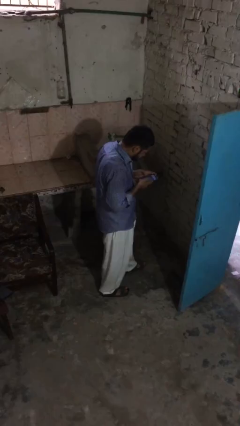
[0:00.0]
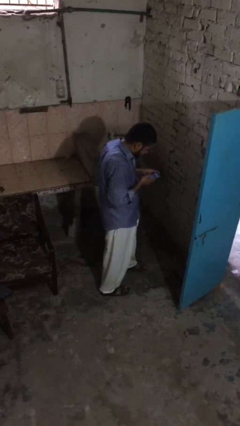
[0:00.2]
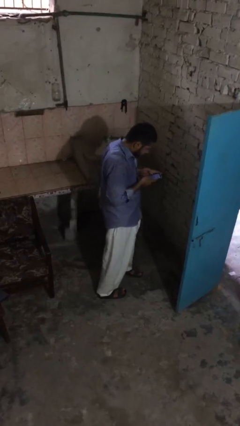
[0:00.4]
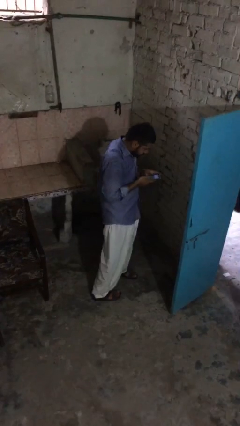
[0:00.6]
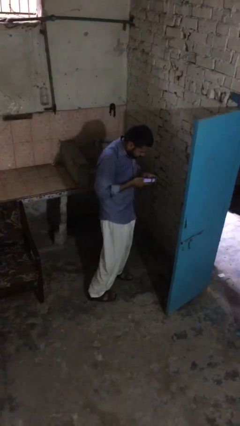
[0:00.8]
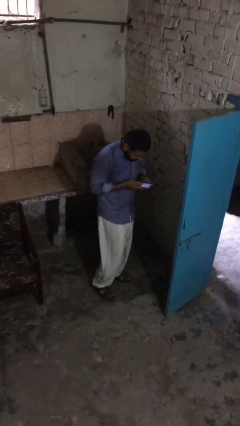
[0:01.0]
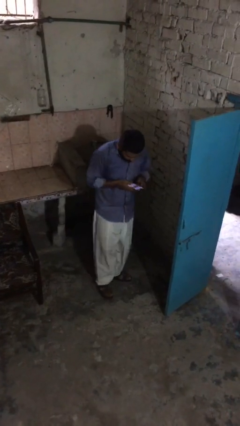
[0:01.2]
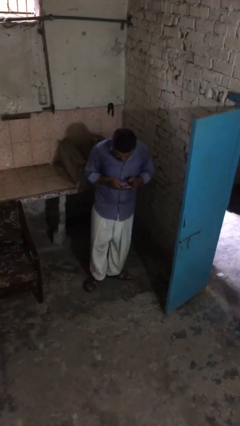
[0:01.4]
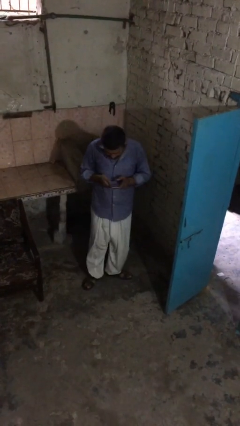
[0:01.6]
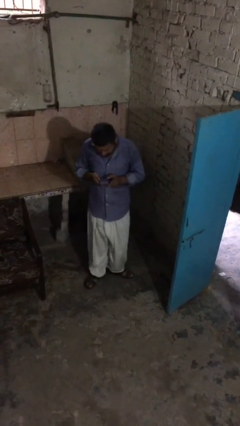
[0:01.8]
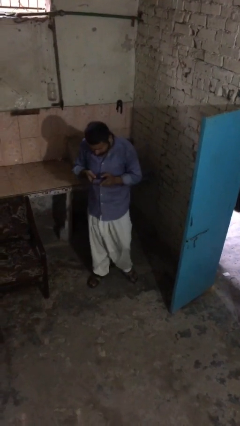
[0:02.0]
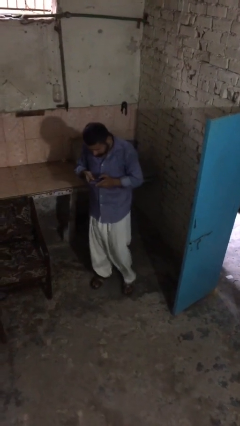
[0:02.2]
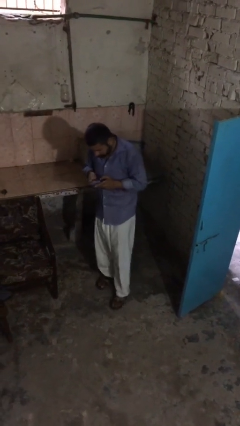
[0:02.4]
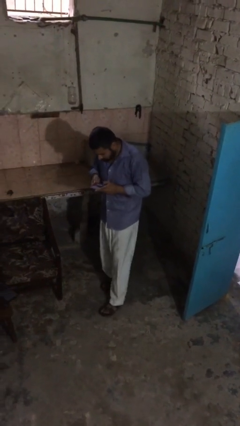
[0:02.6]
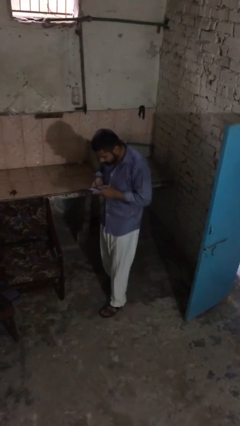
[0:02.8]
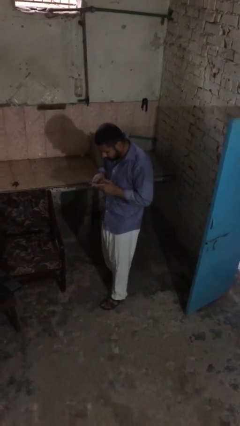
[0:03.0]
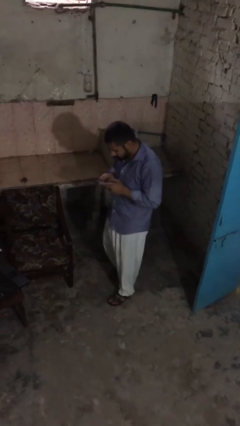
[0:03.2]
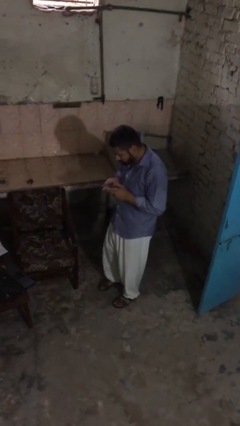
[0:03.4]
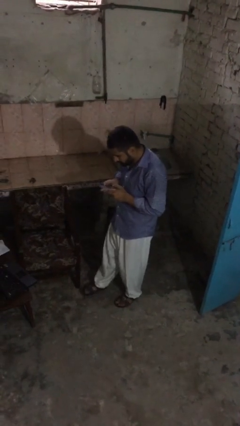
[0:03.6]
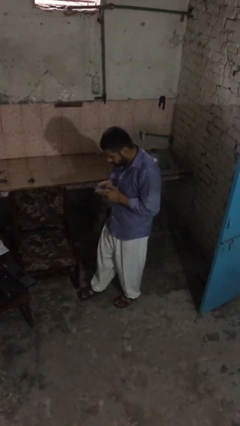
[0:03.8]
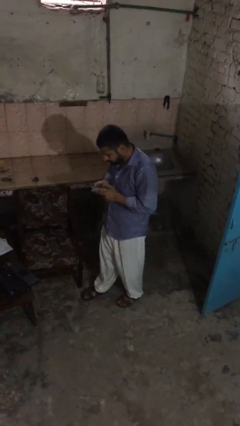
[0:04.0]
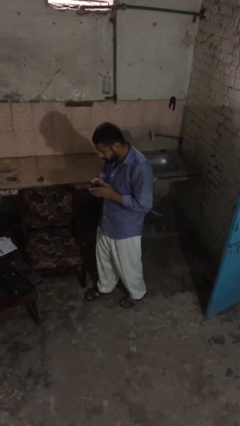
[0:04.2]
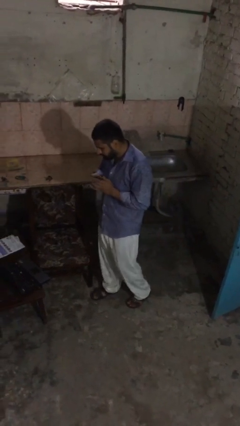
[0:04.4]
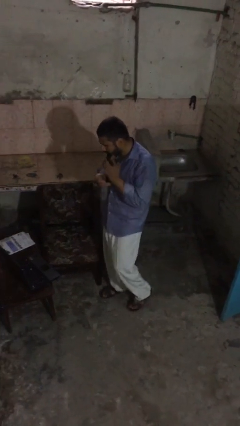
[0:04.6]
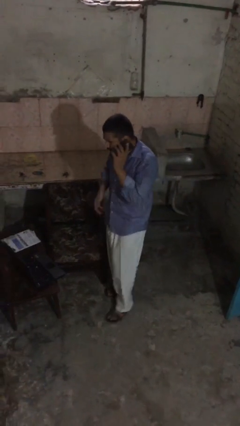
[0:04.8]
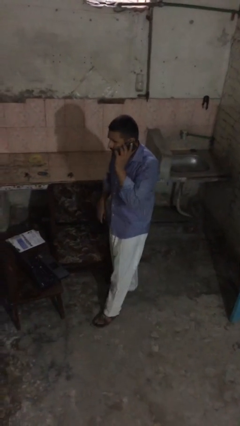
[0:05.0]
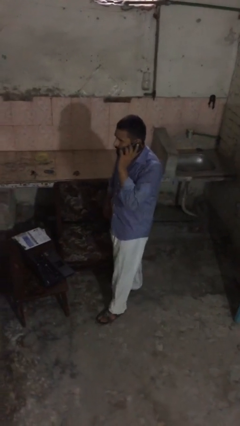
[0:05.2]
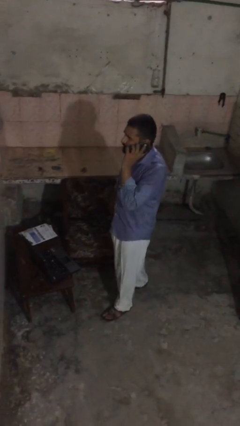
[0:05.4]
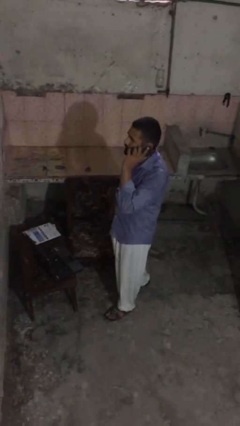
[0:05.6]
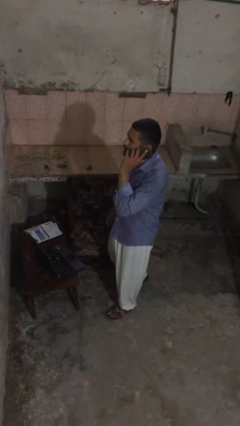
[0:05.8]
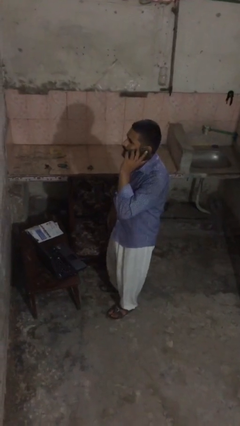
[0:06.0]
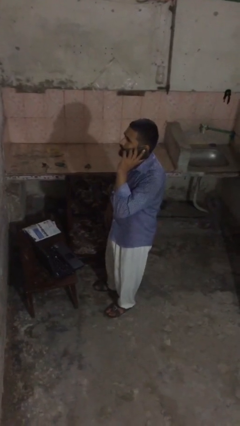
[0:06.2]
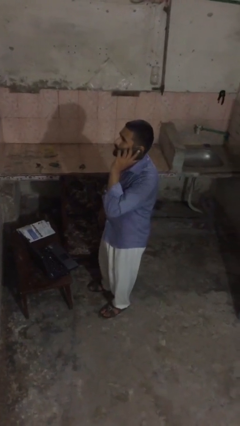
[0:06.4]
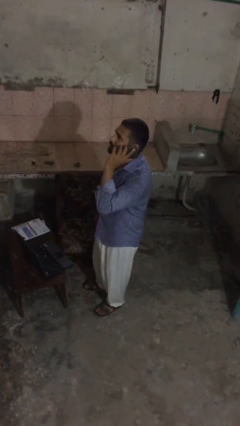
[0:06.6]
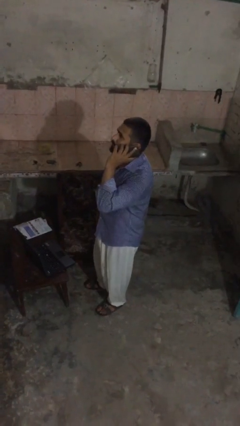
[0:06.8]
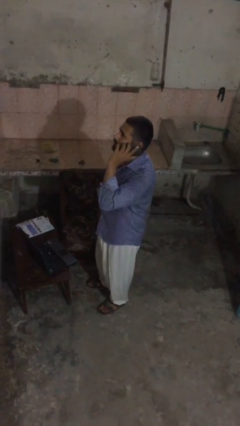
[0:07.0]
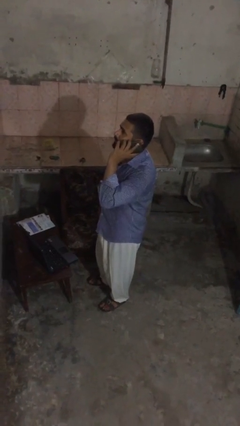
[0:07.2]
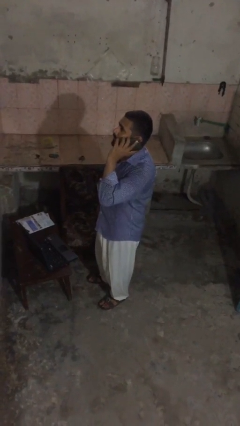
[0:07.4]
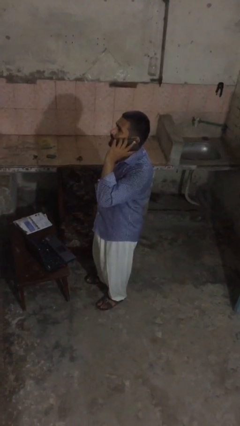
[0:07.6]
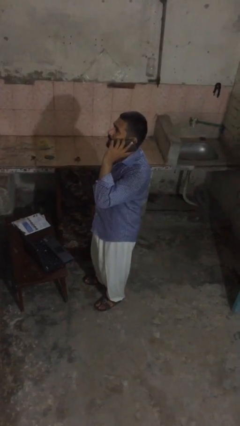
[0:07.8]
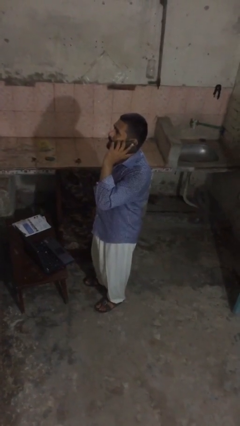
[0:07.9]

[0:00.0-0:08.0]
person talks on phone

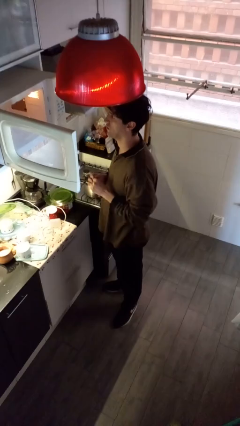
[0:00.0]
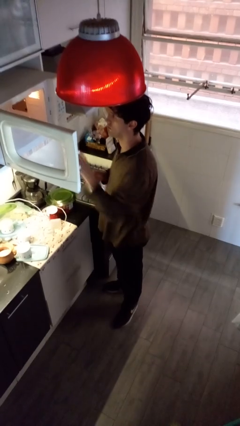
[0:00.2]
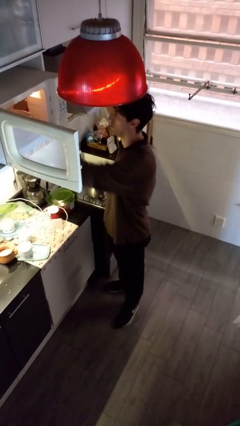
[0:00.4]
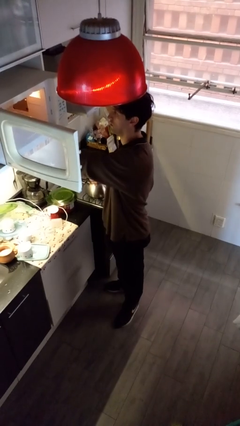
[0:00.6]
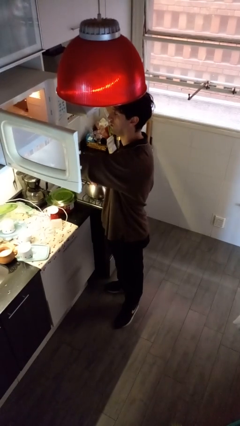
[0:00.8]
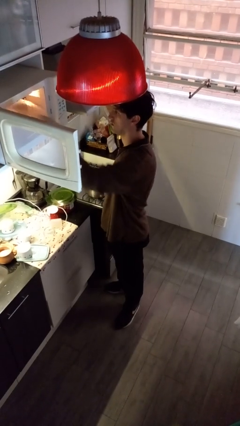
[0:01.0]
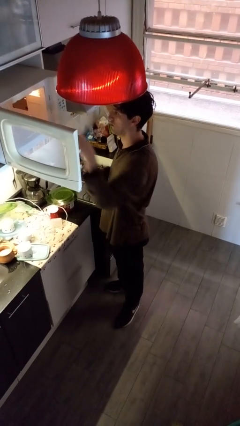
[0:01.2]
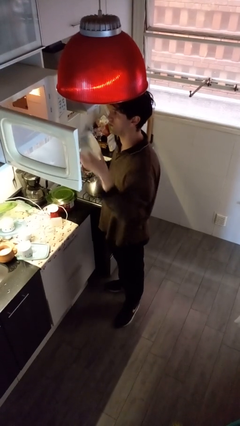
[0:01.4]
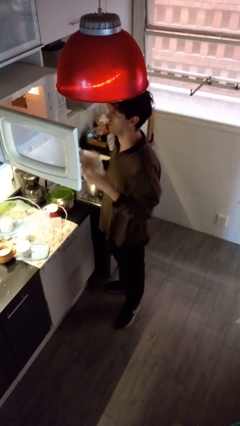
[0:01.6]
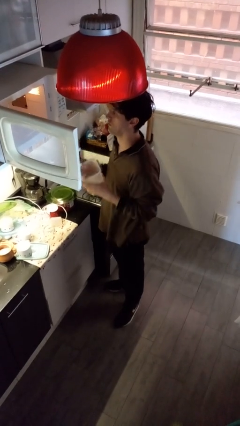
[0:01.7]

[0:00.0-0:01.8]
person takes object from microwave

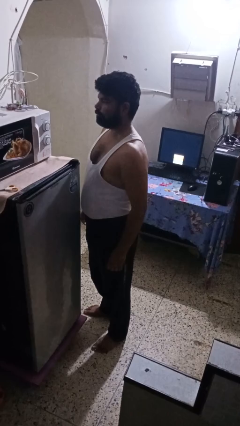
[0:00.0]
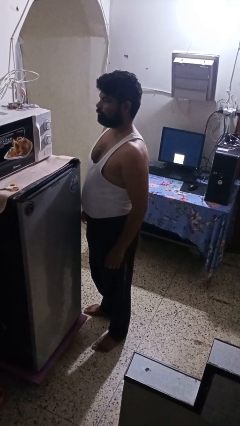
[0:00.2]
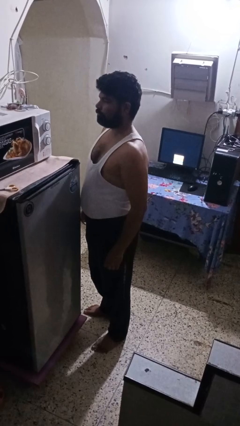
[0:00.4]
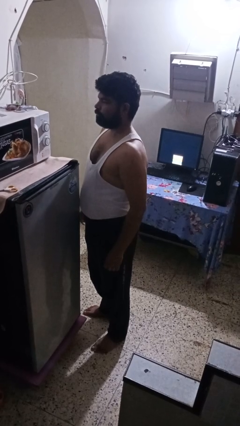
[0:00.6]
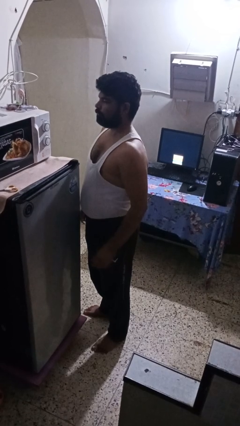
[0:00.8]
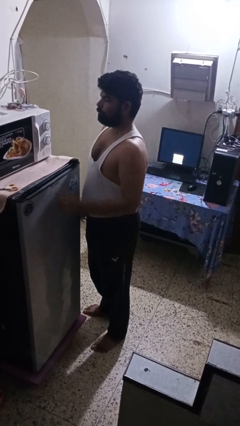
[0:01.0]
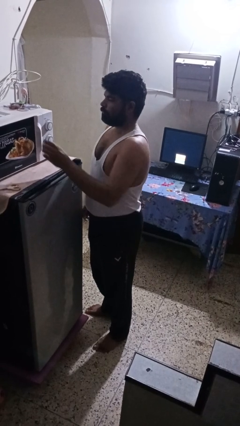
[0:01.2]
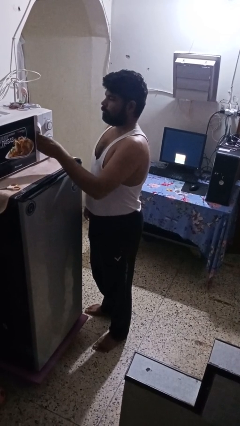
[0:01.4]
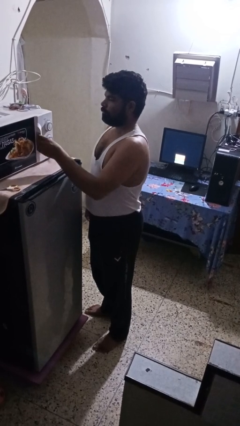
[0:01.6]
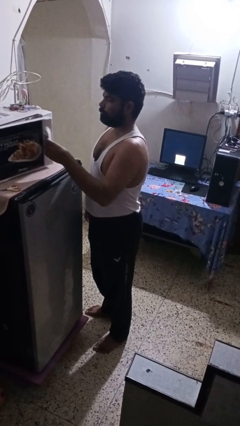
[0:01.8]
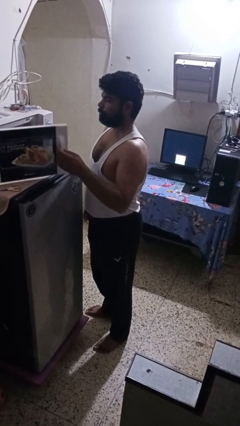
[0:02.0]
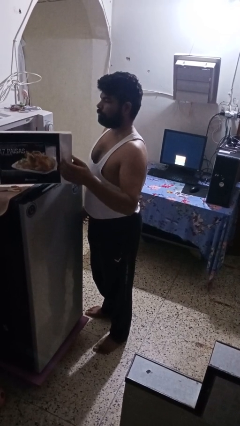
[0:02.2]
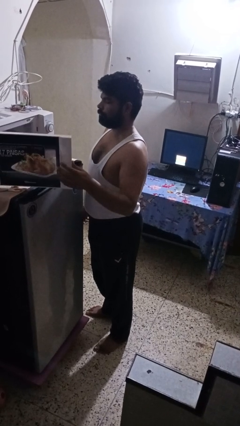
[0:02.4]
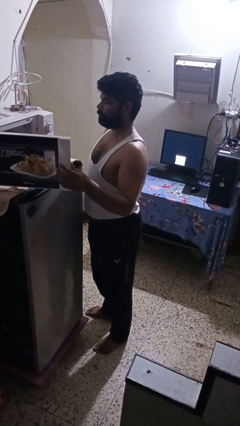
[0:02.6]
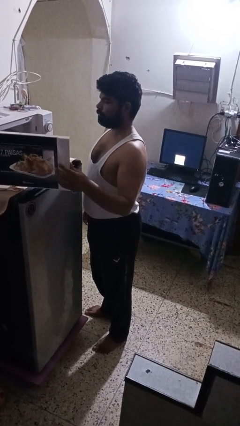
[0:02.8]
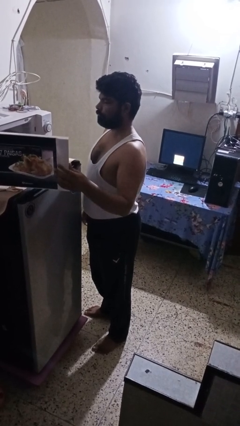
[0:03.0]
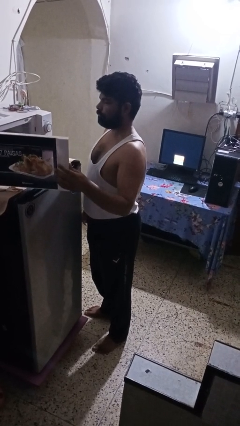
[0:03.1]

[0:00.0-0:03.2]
person opens microwave

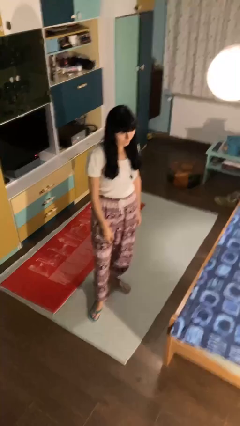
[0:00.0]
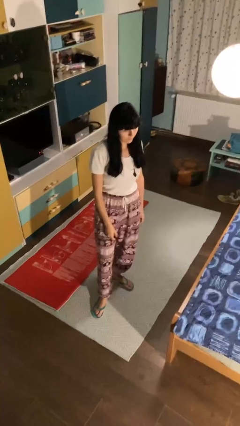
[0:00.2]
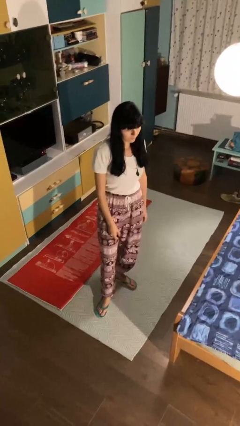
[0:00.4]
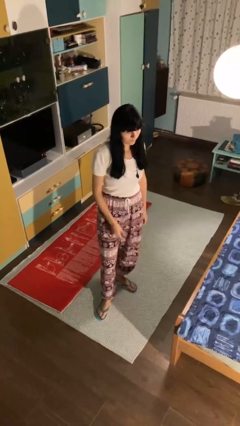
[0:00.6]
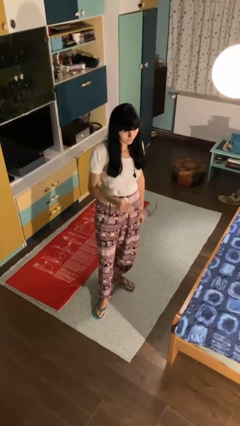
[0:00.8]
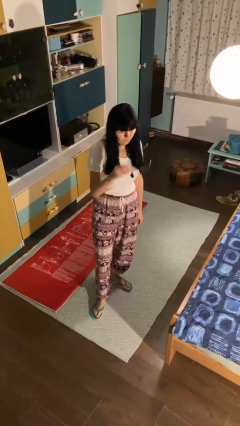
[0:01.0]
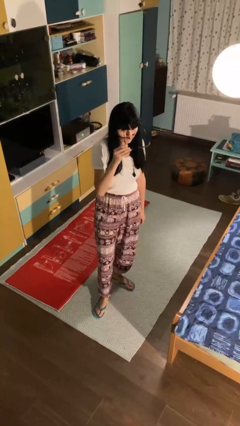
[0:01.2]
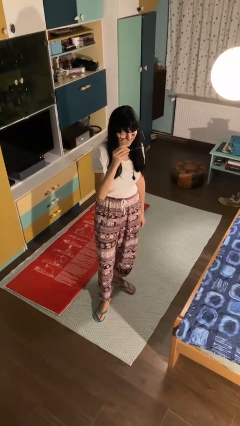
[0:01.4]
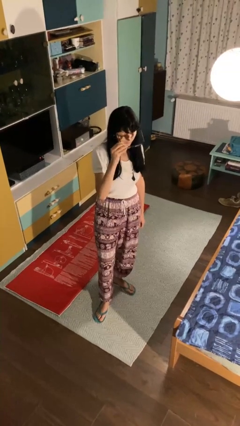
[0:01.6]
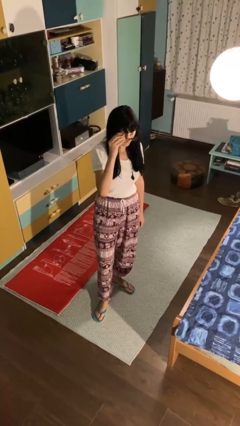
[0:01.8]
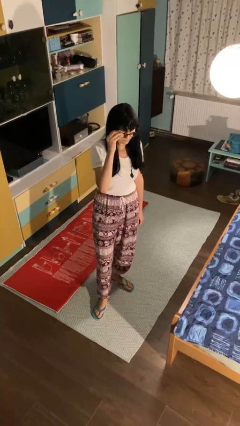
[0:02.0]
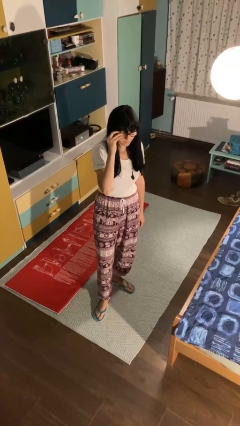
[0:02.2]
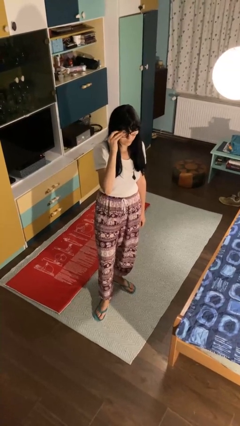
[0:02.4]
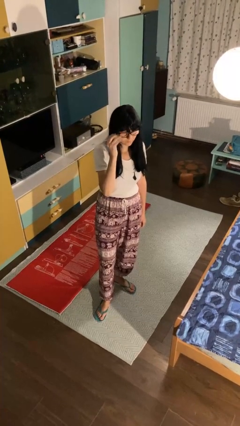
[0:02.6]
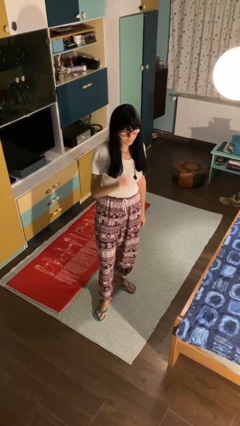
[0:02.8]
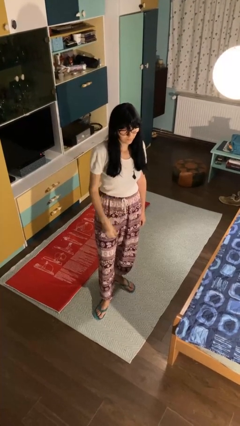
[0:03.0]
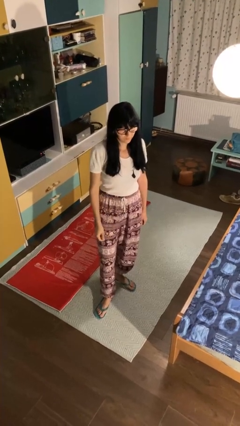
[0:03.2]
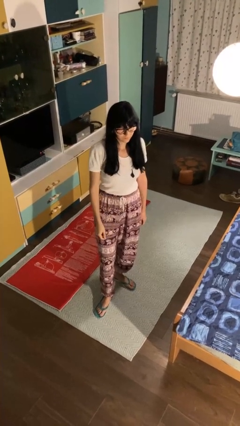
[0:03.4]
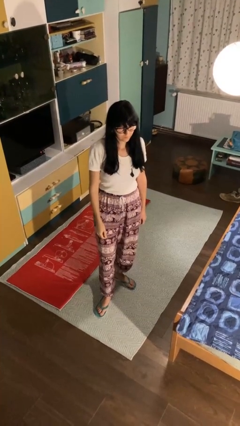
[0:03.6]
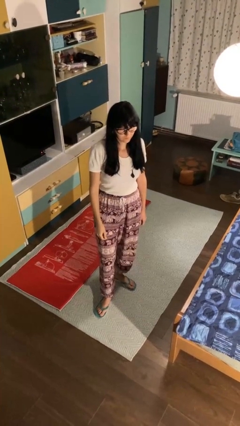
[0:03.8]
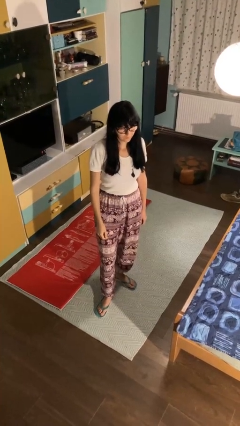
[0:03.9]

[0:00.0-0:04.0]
person puts on glasses

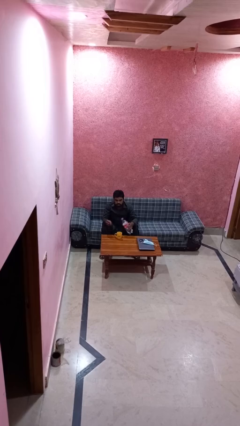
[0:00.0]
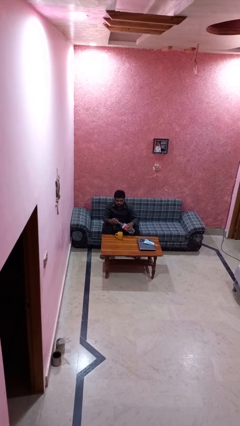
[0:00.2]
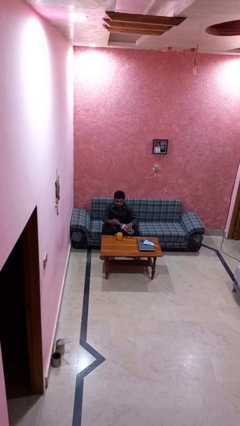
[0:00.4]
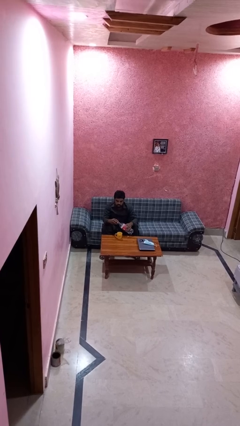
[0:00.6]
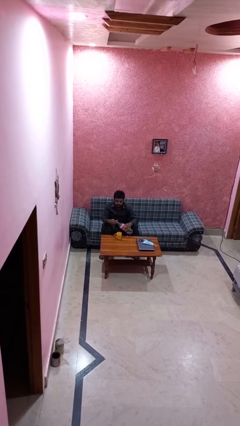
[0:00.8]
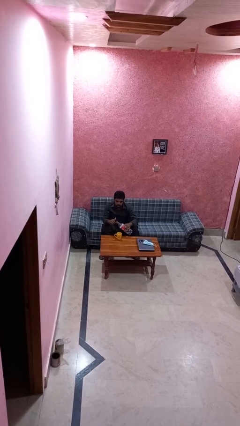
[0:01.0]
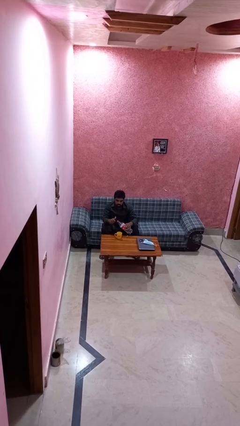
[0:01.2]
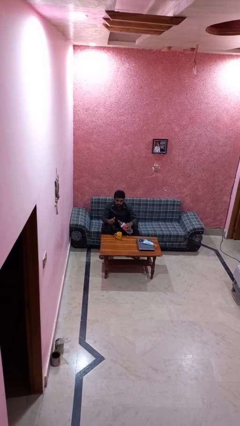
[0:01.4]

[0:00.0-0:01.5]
person screws lid to bottle
